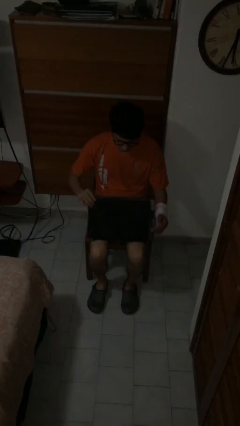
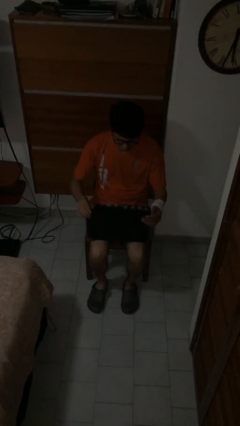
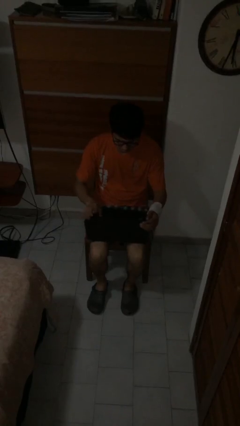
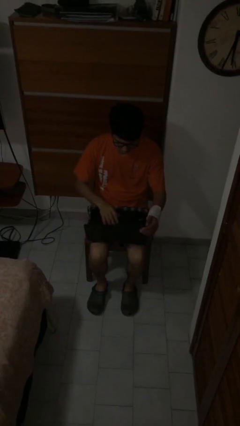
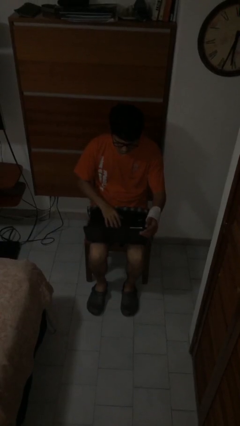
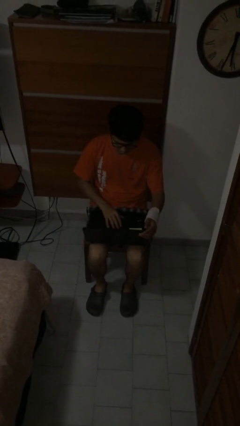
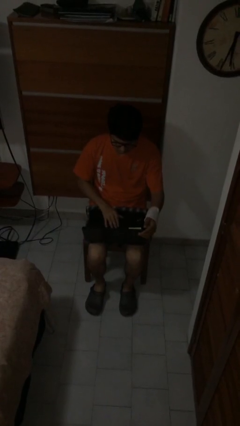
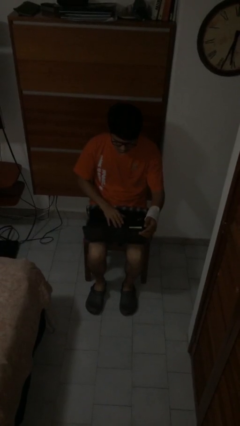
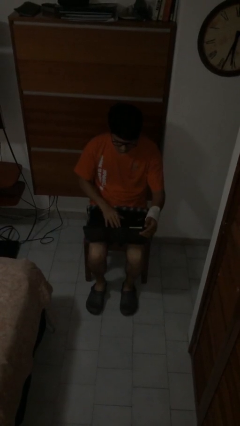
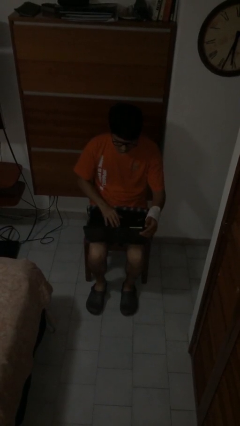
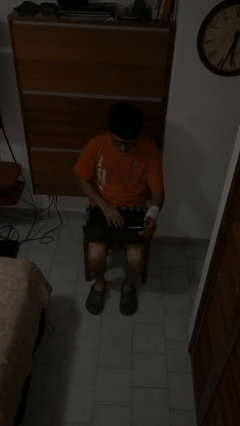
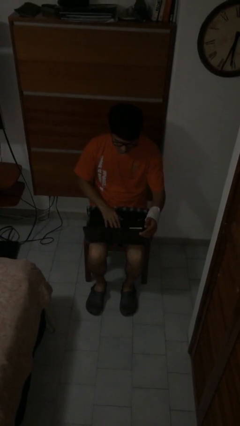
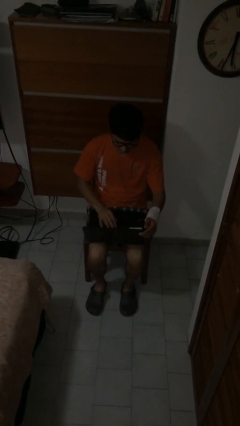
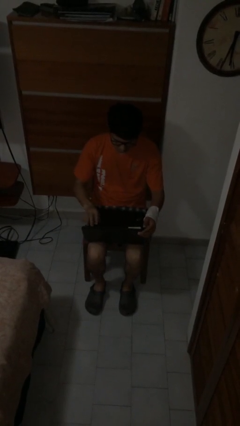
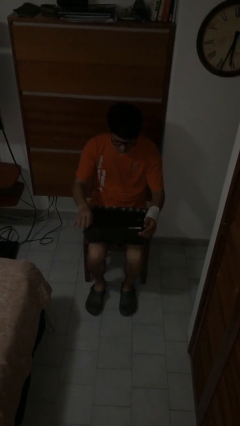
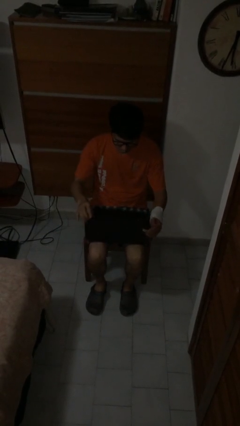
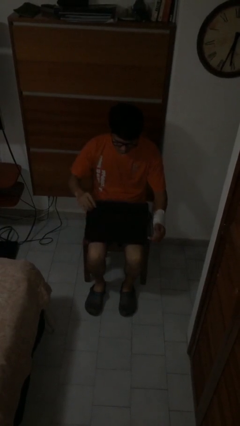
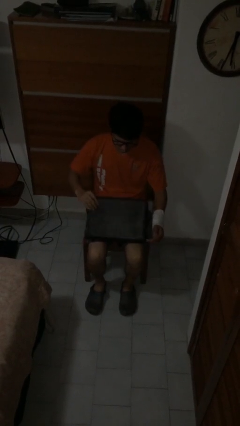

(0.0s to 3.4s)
person interacts with laptop

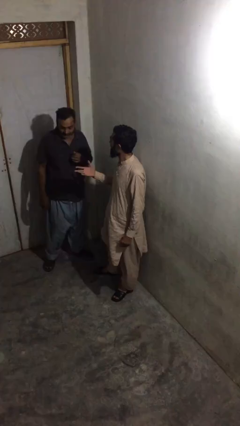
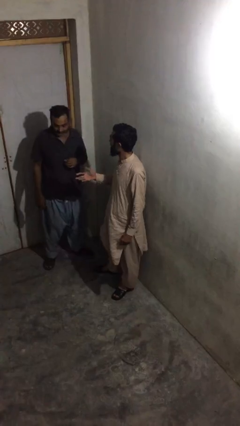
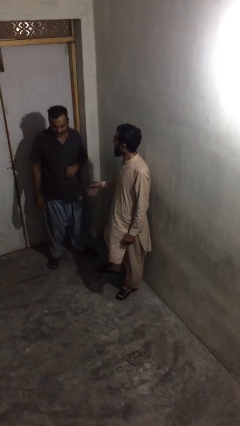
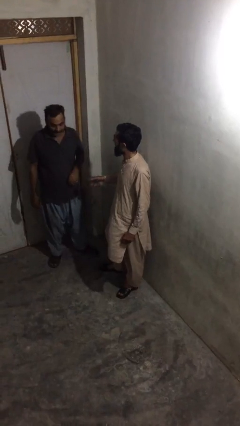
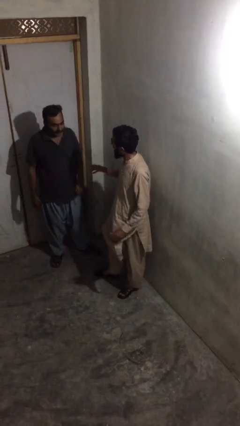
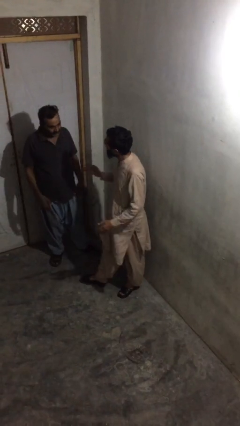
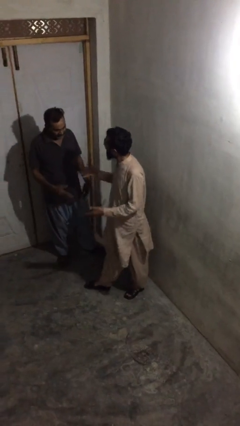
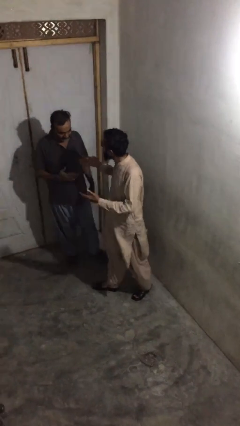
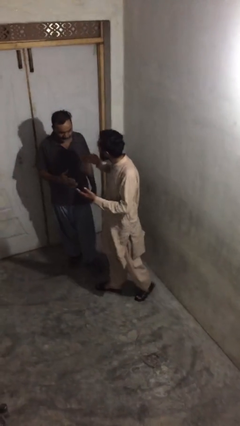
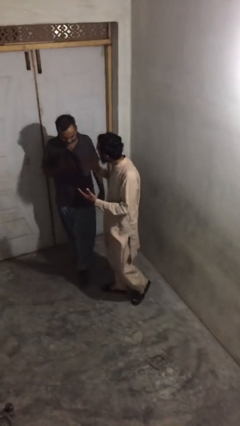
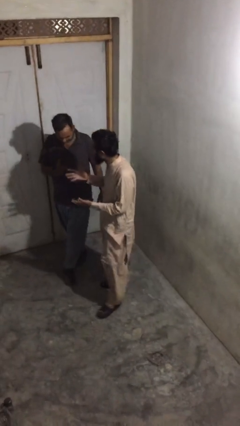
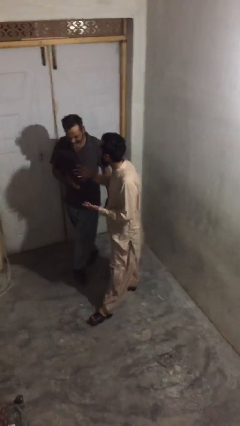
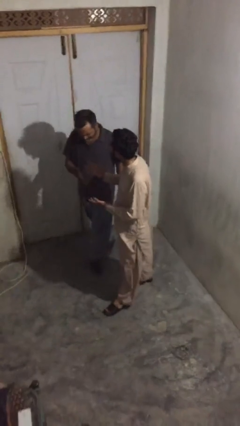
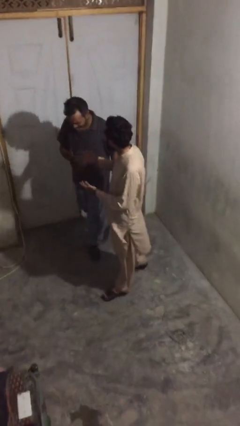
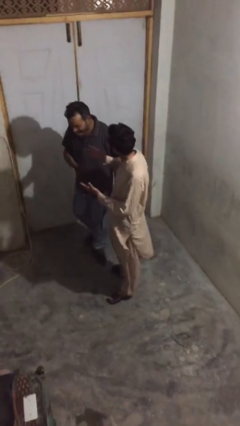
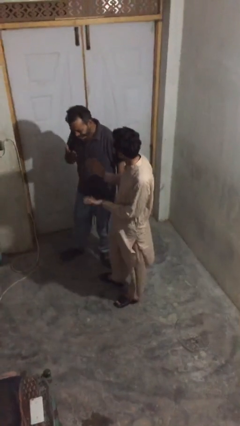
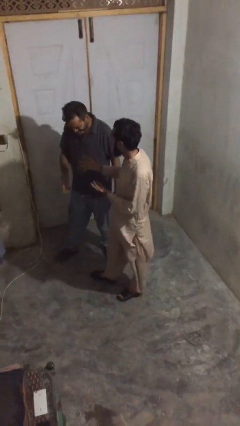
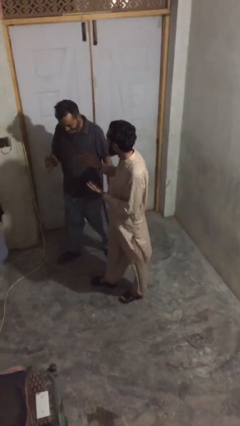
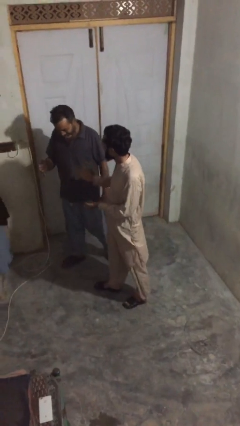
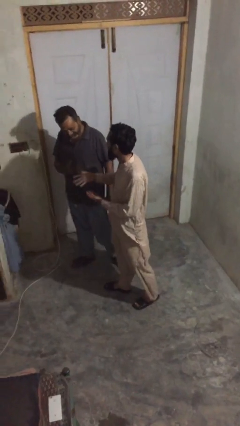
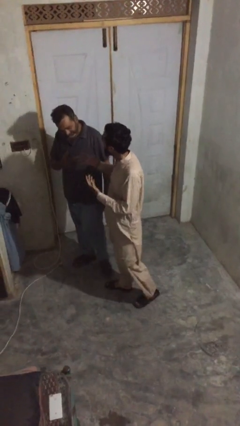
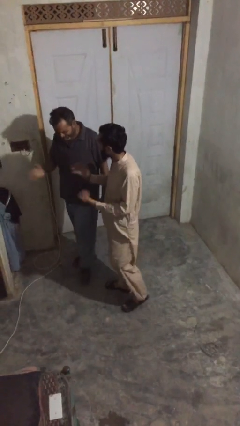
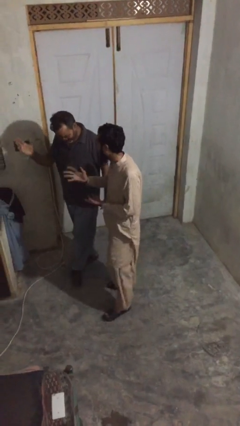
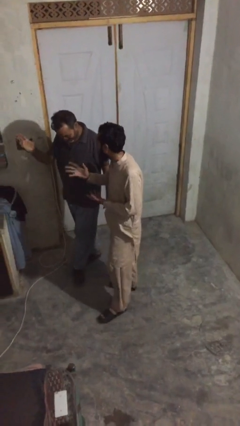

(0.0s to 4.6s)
person talks to person

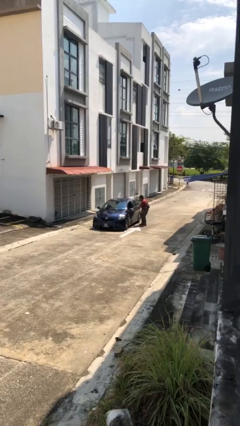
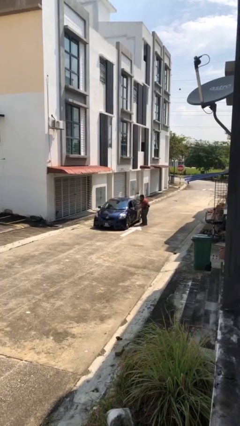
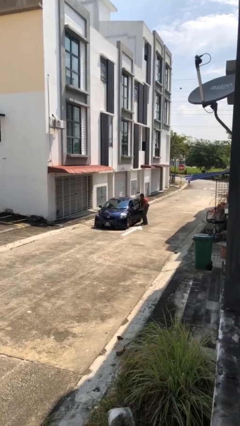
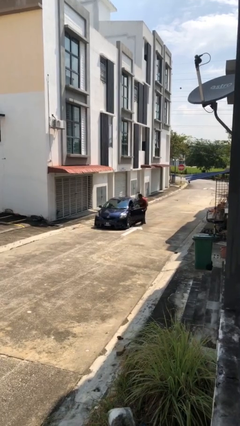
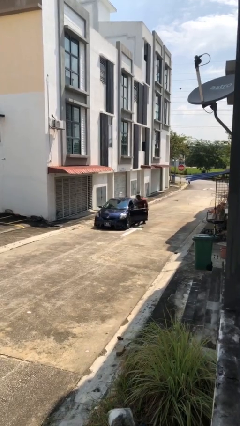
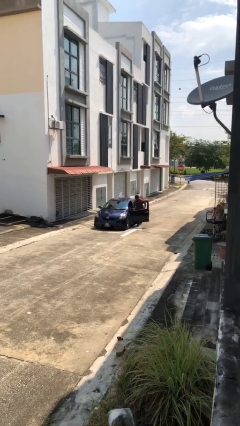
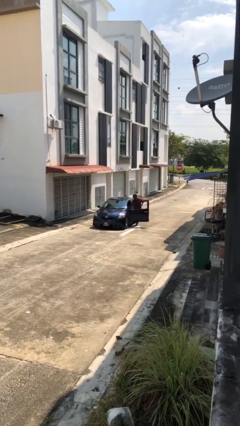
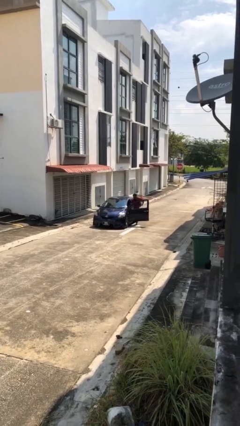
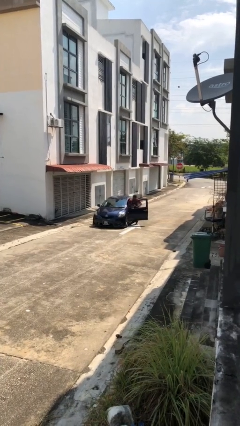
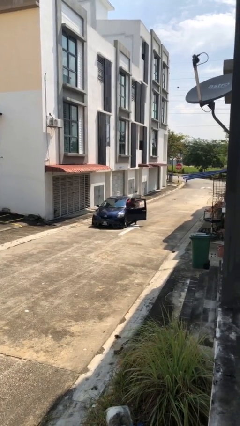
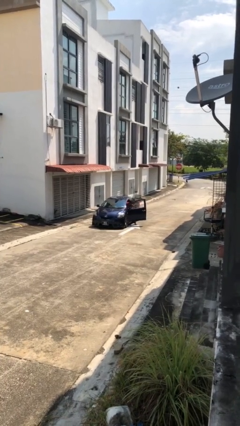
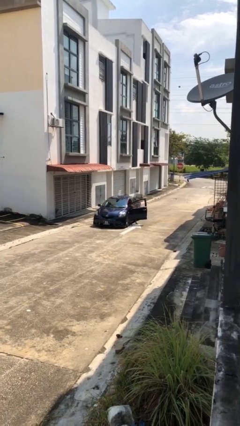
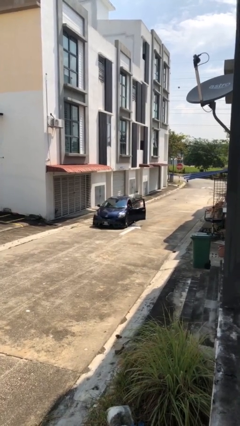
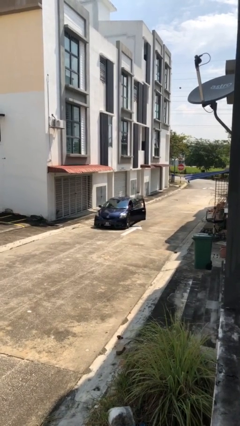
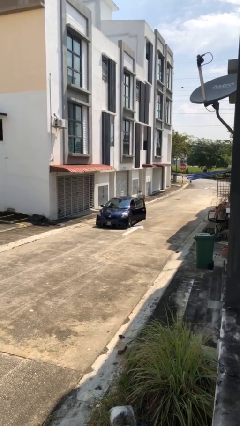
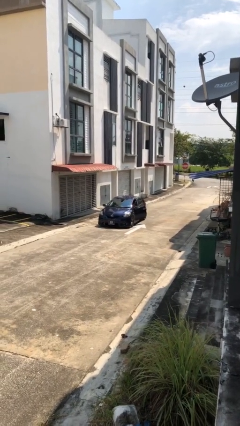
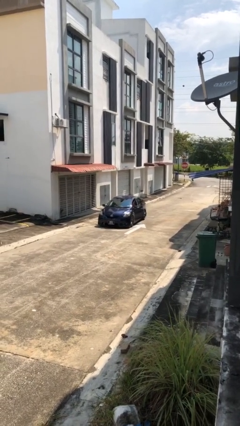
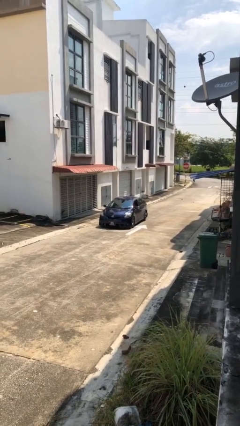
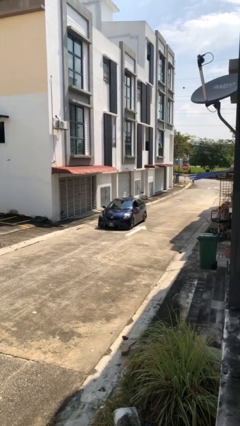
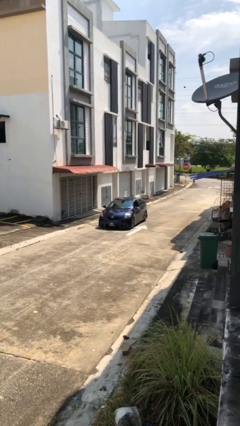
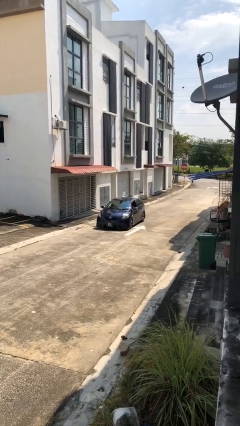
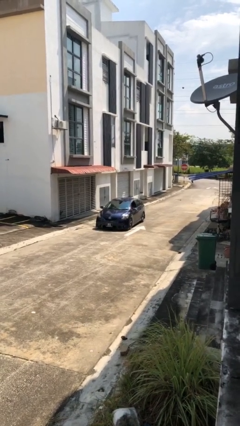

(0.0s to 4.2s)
car picks up person

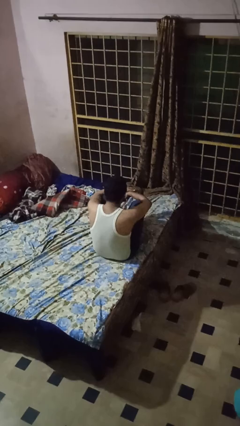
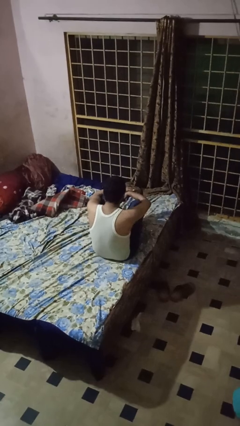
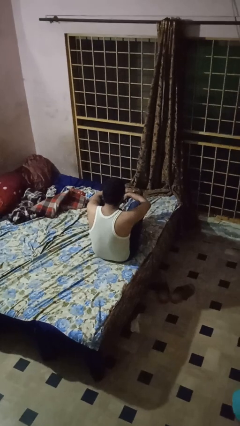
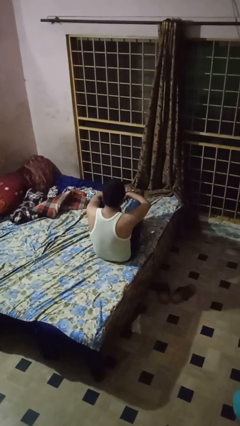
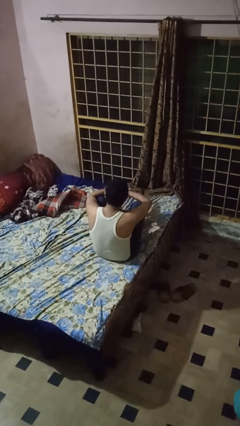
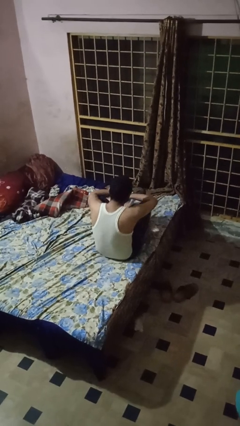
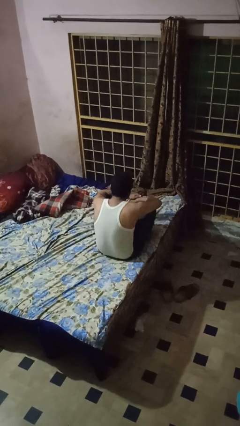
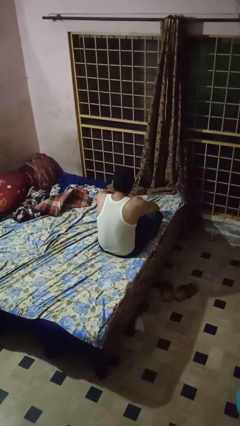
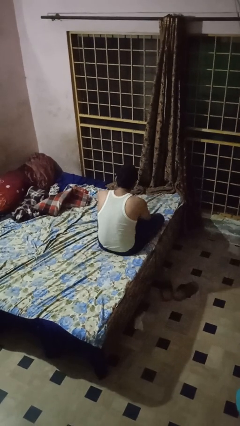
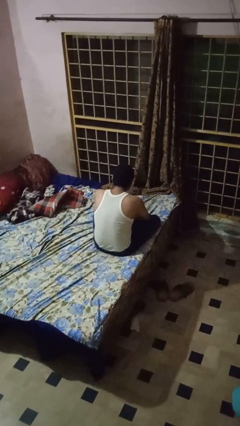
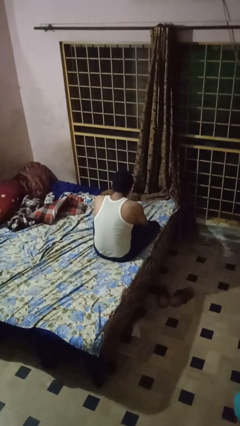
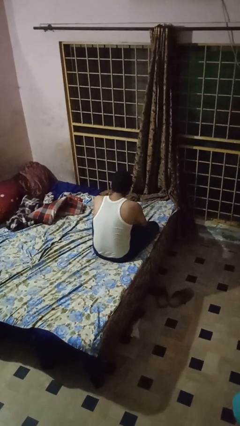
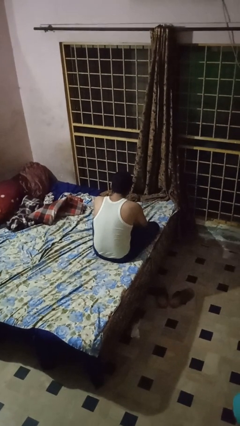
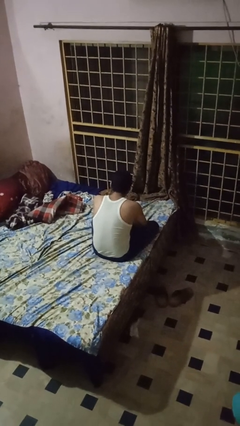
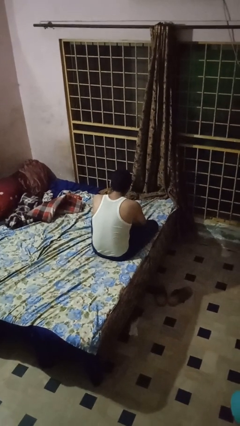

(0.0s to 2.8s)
person crosses legs

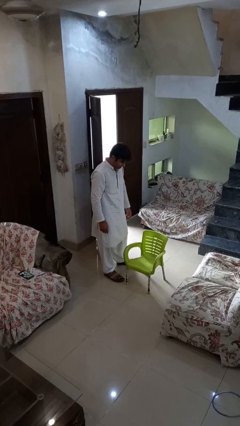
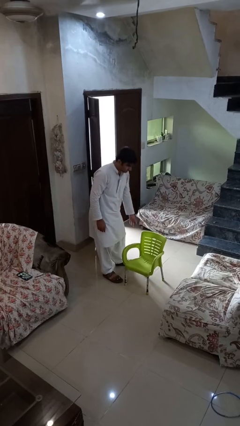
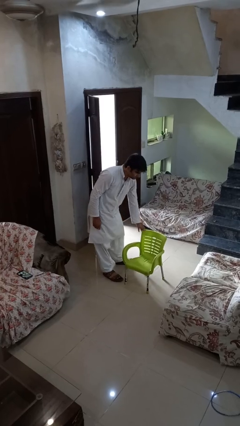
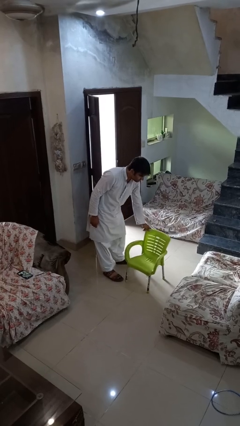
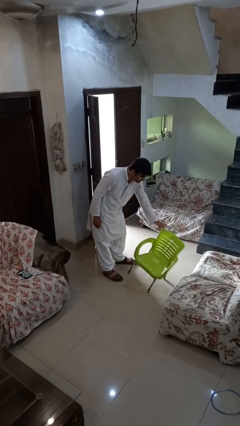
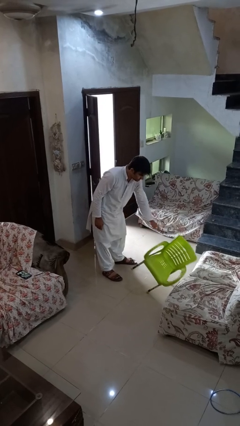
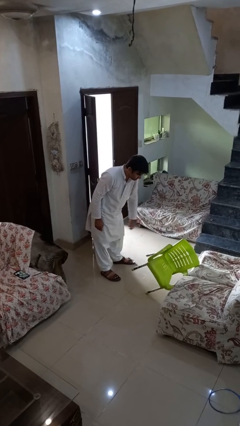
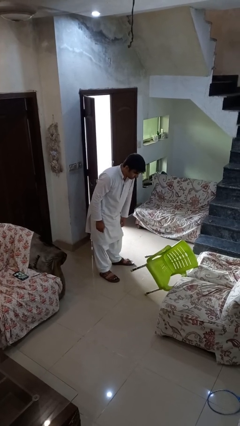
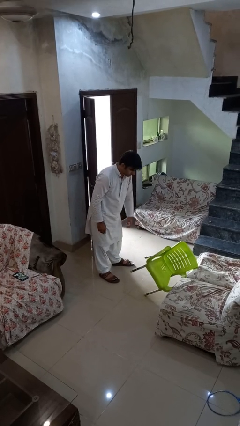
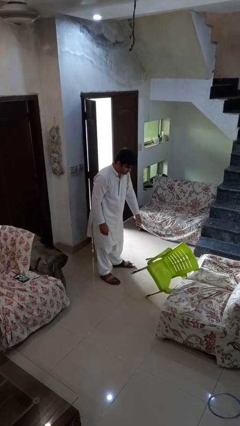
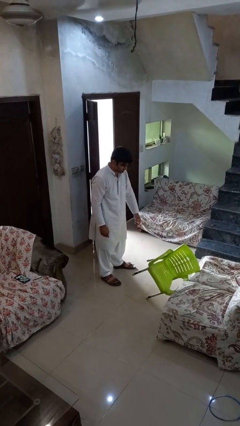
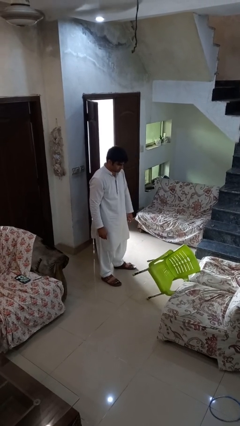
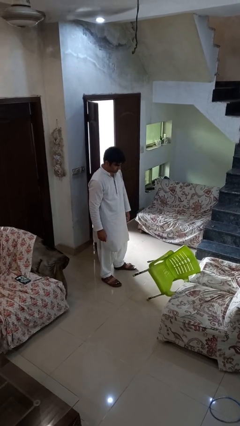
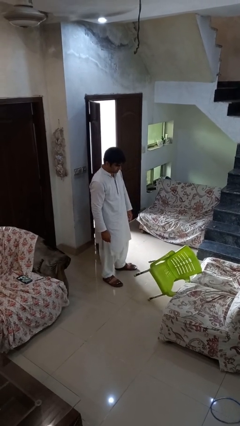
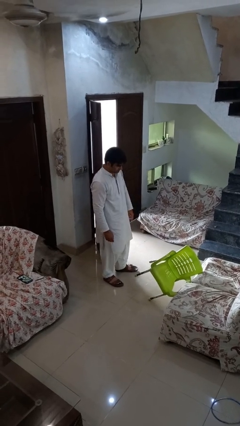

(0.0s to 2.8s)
person knocks over furniture
